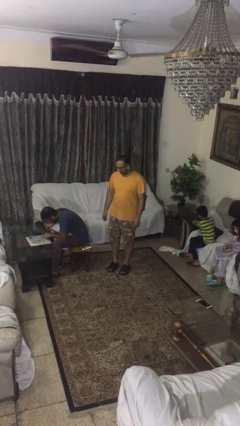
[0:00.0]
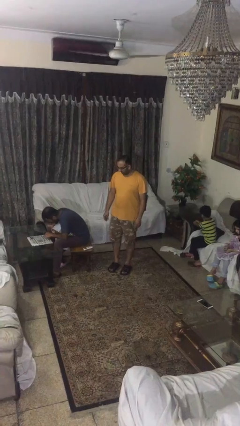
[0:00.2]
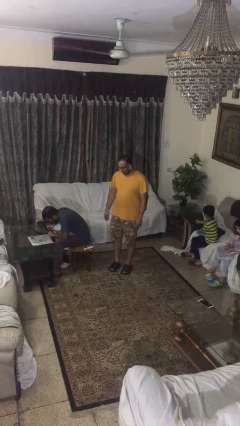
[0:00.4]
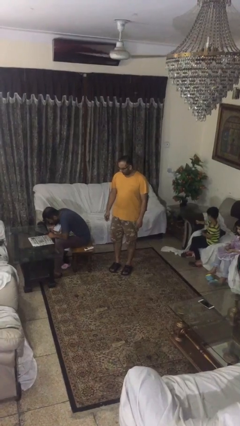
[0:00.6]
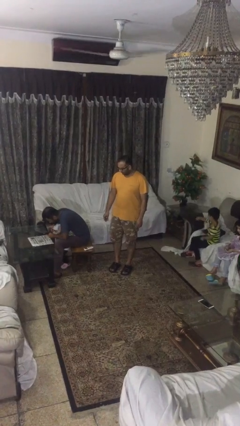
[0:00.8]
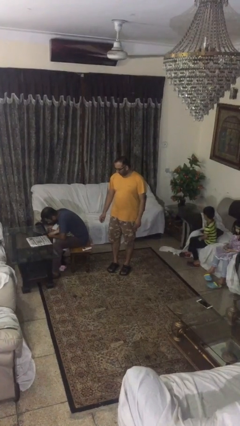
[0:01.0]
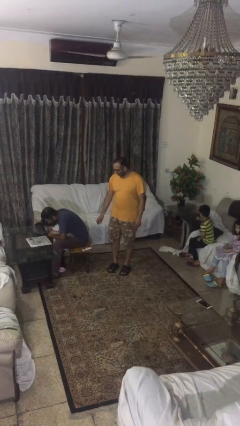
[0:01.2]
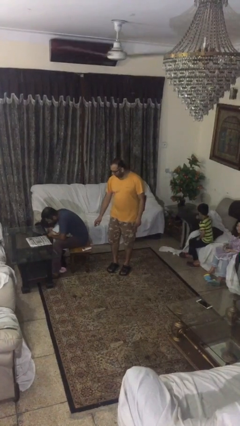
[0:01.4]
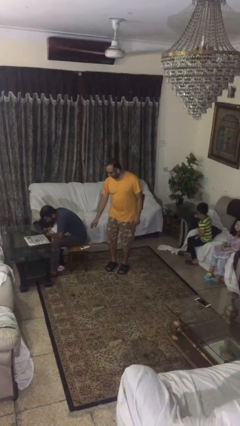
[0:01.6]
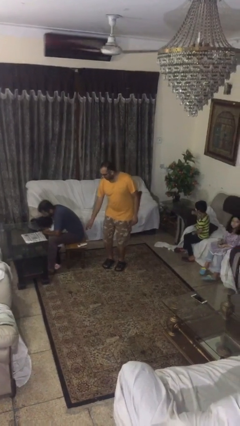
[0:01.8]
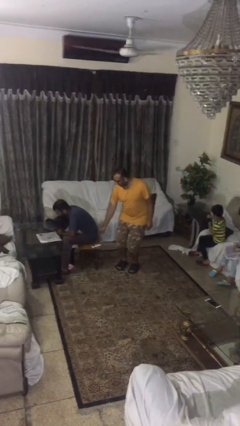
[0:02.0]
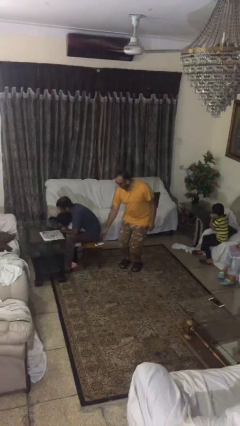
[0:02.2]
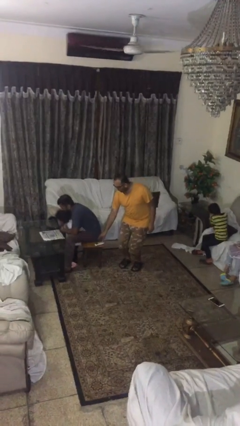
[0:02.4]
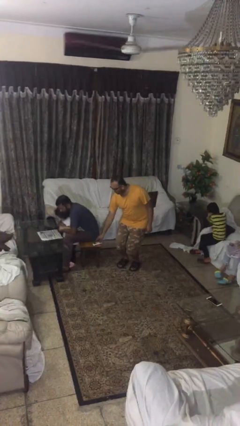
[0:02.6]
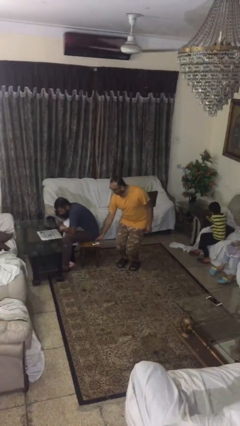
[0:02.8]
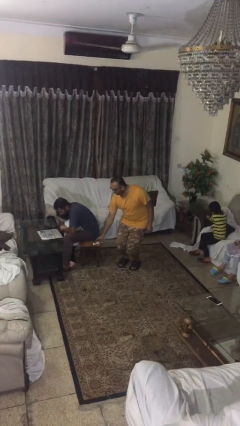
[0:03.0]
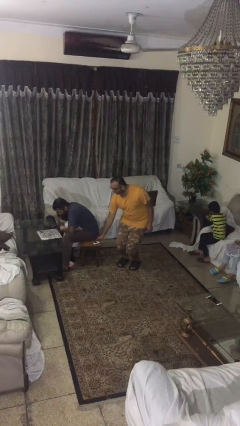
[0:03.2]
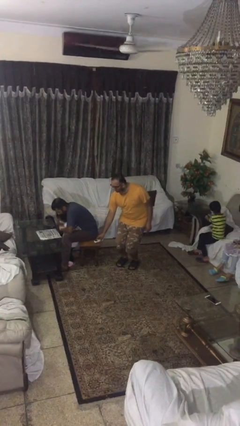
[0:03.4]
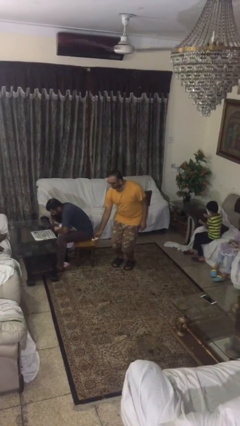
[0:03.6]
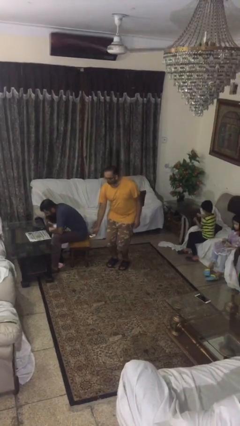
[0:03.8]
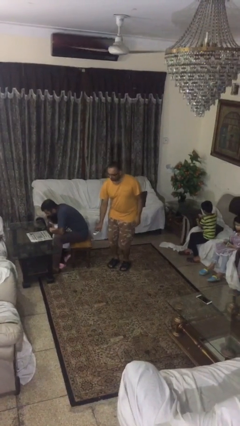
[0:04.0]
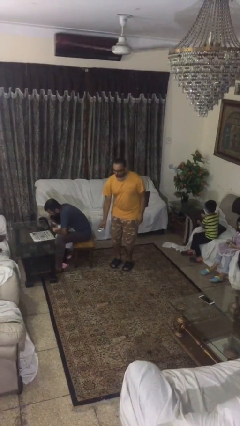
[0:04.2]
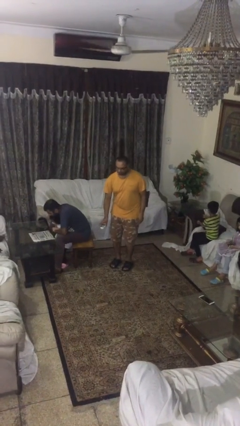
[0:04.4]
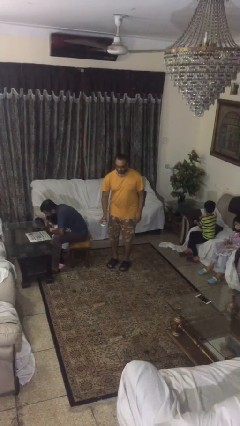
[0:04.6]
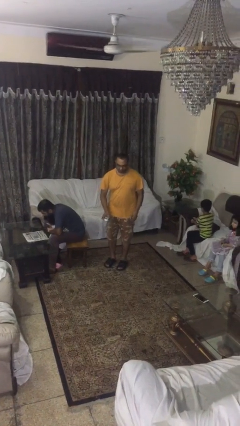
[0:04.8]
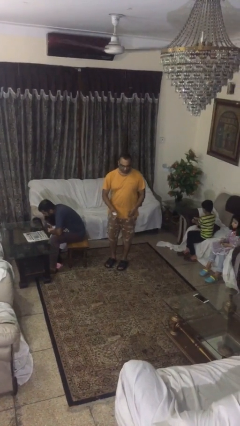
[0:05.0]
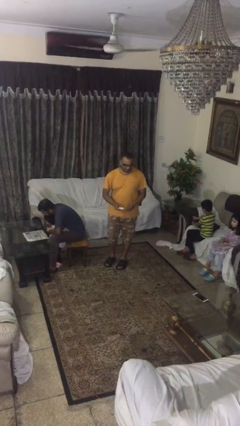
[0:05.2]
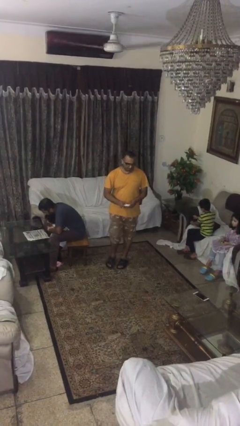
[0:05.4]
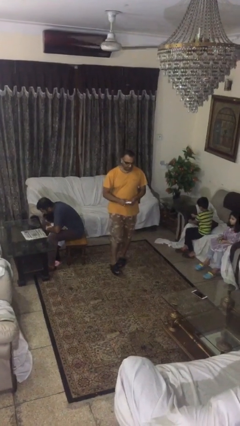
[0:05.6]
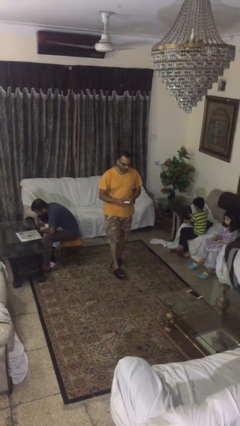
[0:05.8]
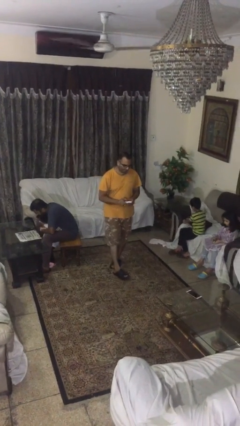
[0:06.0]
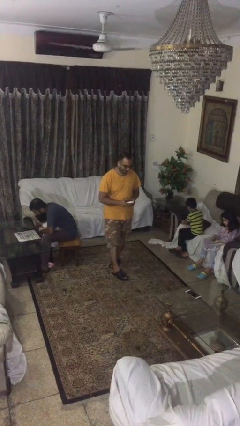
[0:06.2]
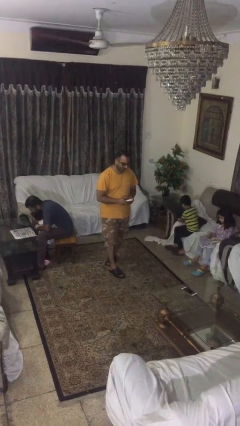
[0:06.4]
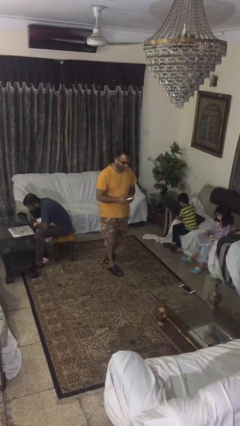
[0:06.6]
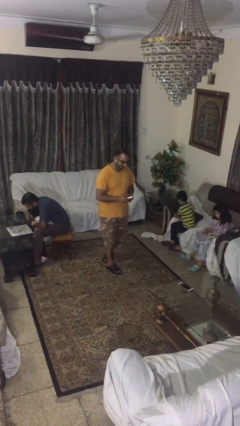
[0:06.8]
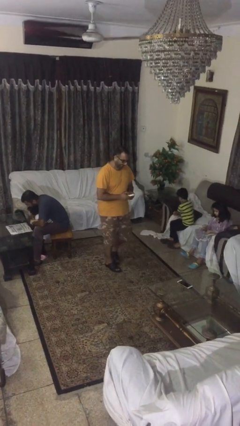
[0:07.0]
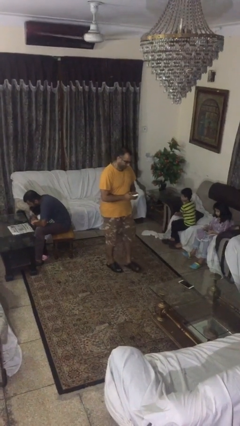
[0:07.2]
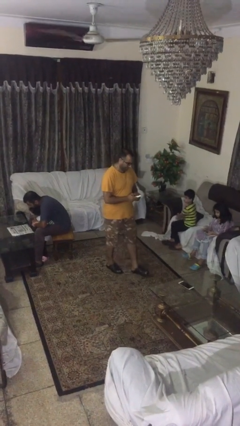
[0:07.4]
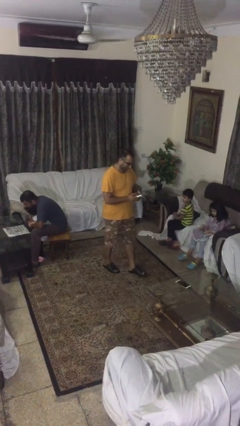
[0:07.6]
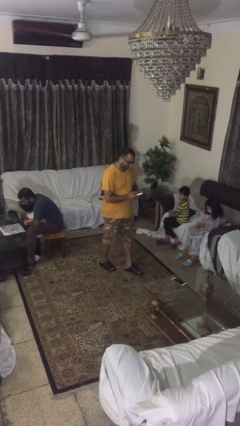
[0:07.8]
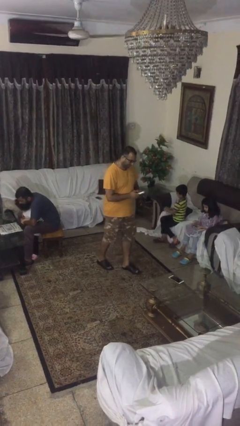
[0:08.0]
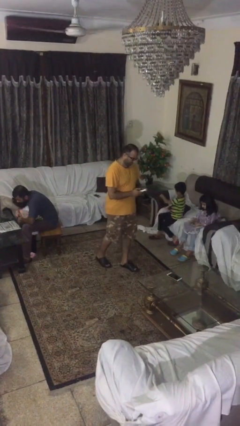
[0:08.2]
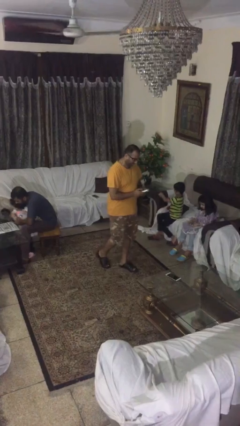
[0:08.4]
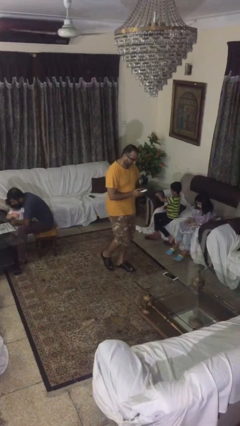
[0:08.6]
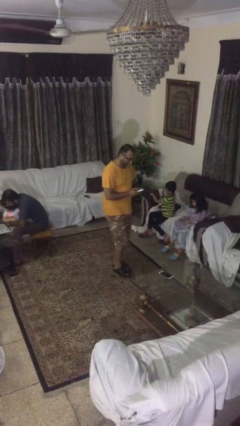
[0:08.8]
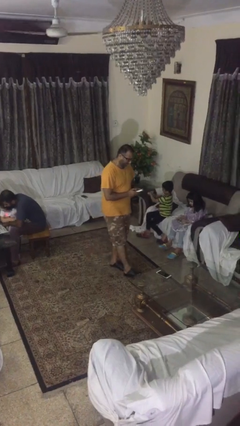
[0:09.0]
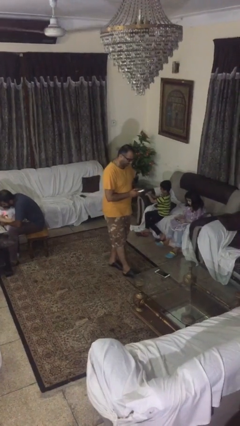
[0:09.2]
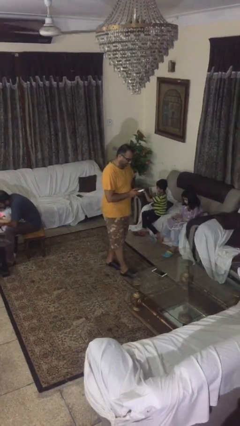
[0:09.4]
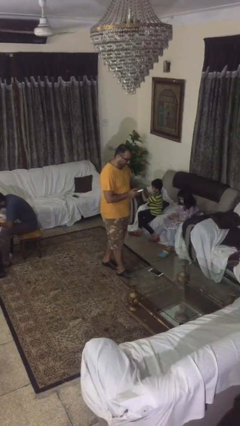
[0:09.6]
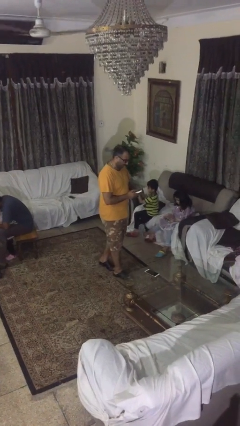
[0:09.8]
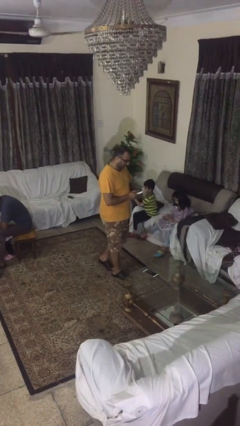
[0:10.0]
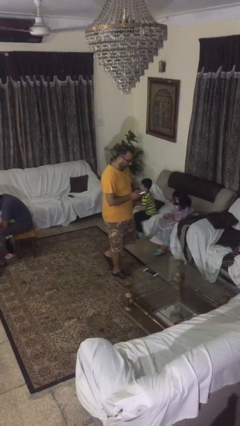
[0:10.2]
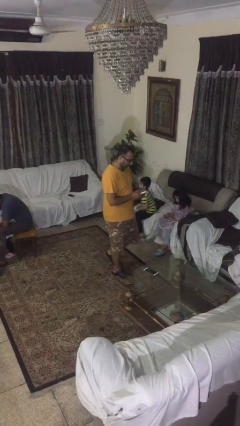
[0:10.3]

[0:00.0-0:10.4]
person steals object from person

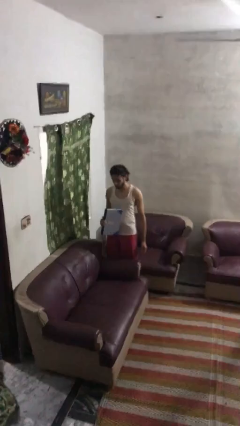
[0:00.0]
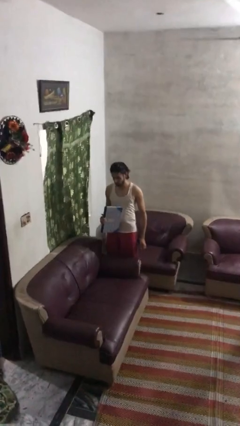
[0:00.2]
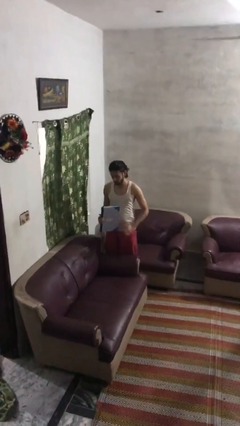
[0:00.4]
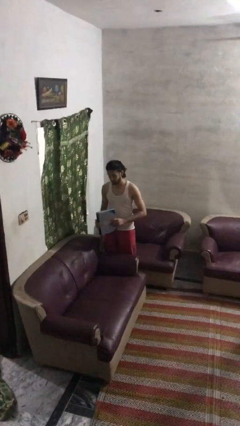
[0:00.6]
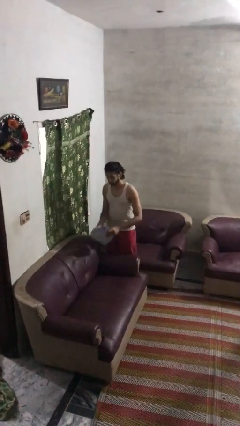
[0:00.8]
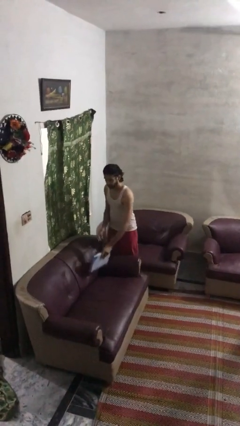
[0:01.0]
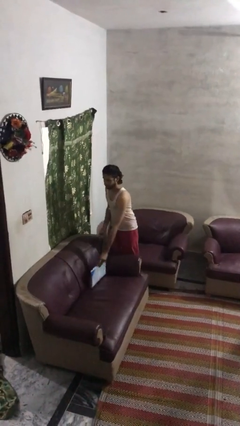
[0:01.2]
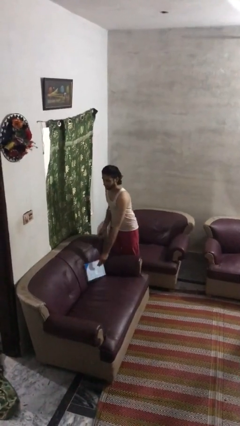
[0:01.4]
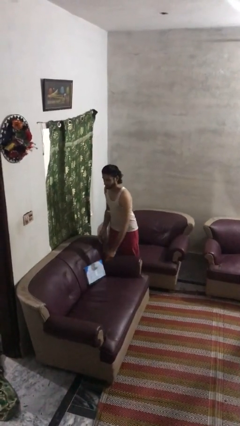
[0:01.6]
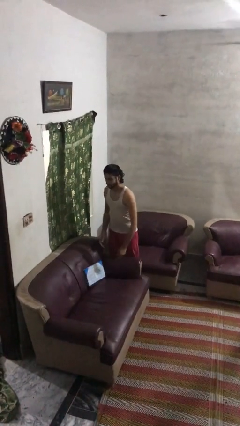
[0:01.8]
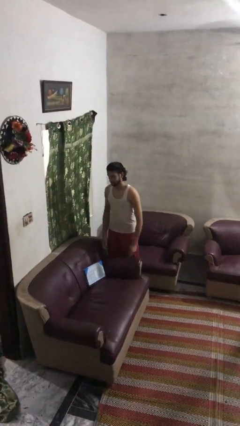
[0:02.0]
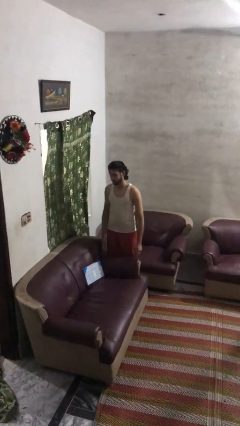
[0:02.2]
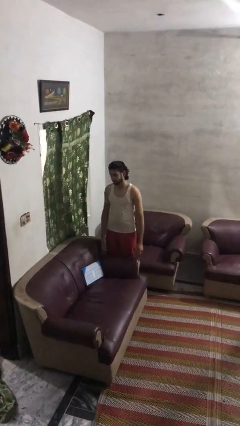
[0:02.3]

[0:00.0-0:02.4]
person puts down object on couch

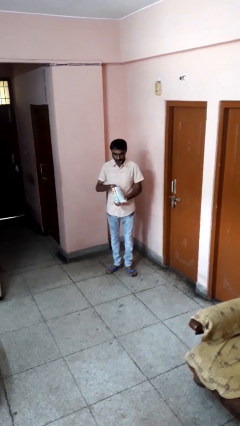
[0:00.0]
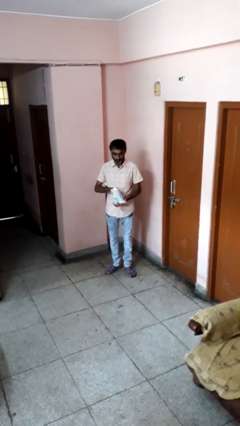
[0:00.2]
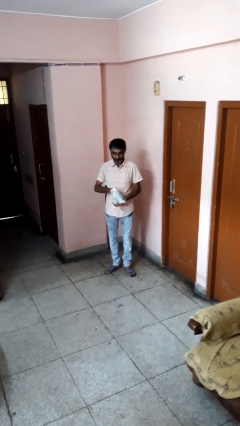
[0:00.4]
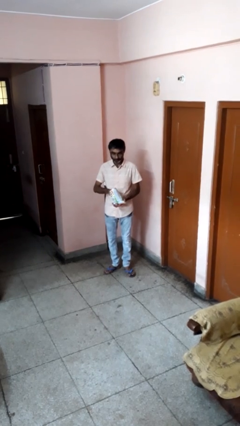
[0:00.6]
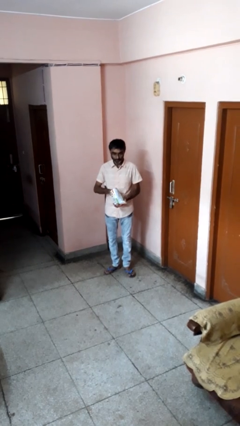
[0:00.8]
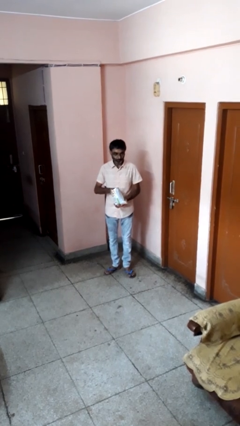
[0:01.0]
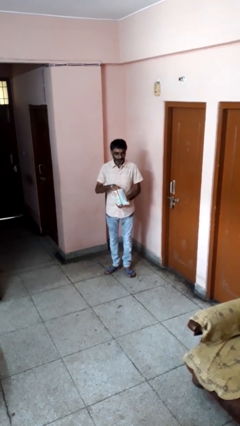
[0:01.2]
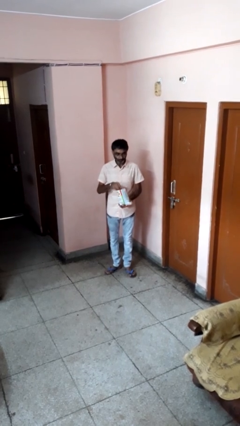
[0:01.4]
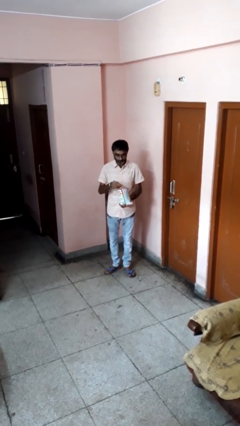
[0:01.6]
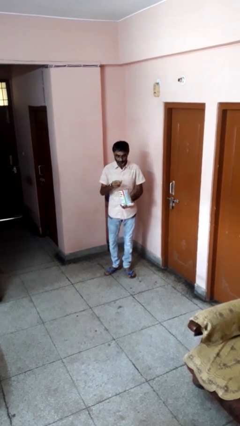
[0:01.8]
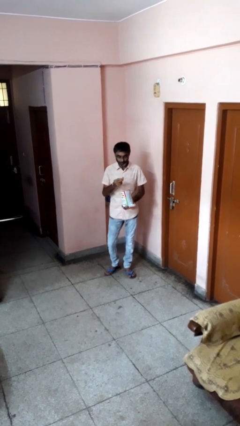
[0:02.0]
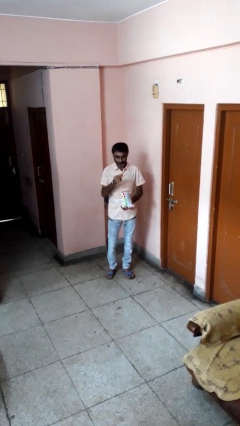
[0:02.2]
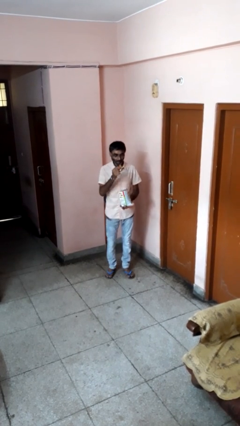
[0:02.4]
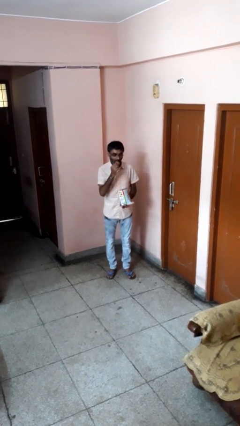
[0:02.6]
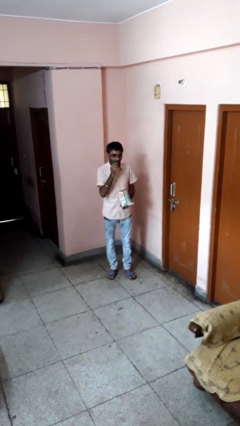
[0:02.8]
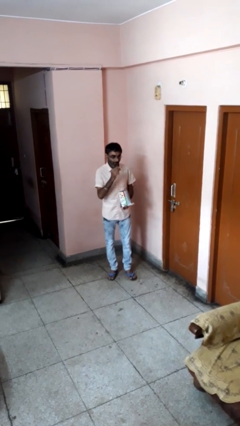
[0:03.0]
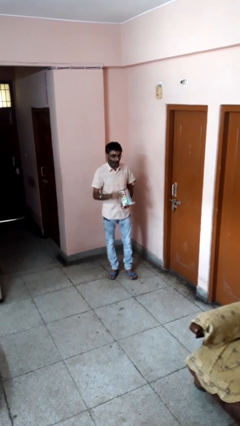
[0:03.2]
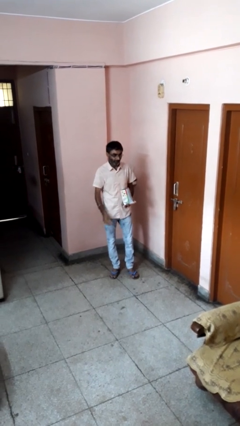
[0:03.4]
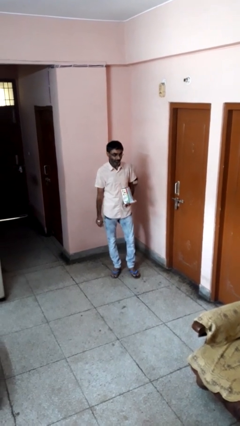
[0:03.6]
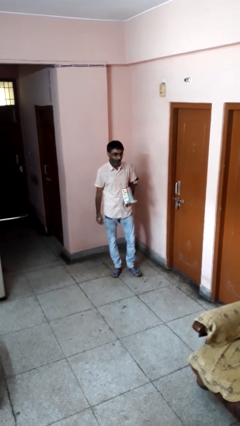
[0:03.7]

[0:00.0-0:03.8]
person eats snack from bag

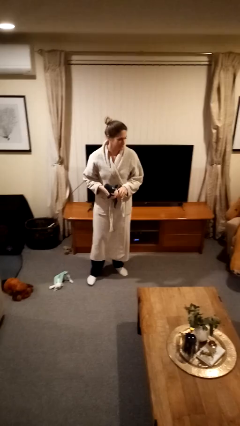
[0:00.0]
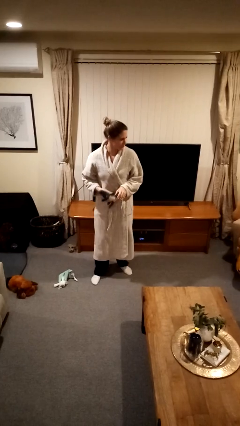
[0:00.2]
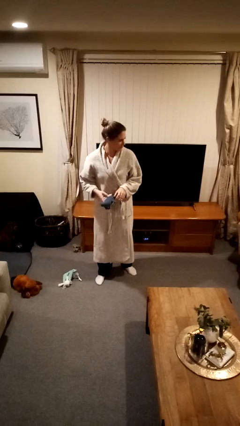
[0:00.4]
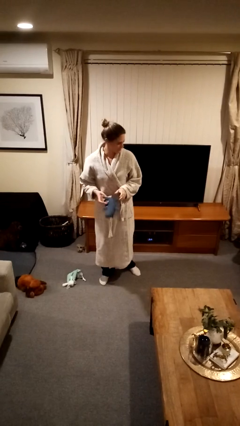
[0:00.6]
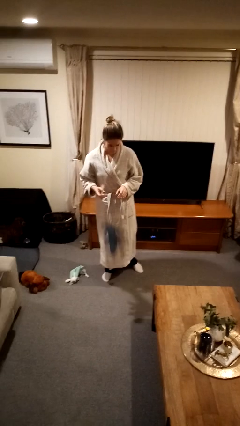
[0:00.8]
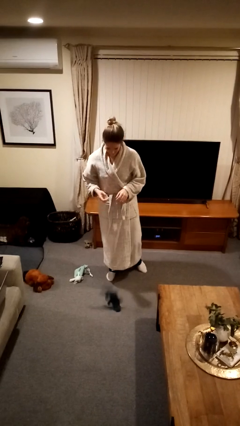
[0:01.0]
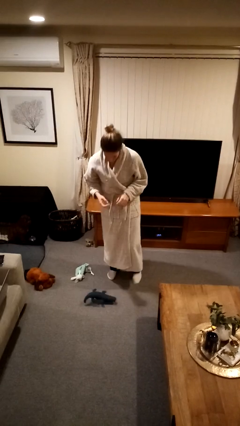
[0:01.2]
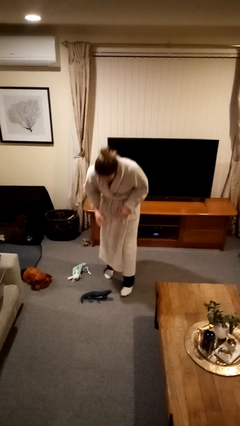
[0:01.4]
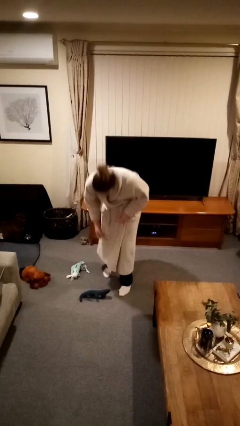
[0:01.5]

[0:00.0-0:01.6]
person drops object
